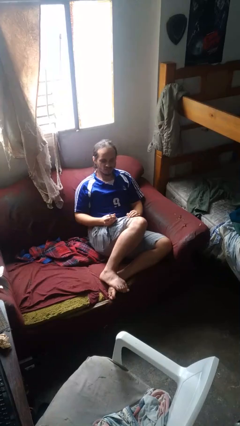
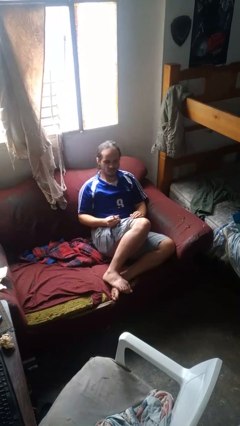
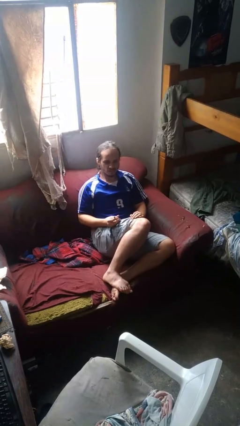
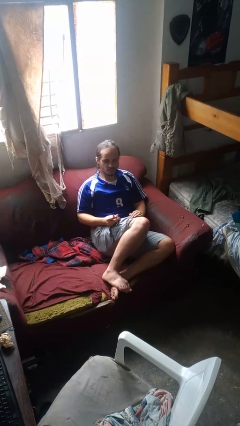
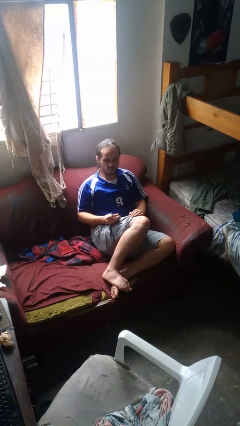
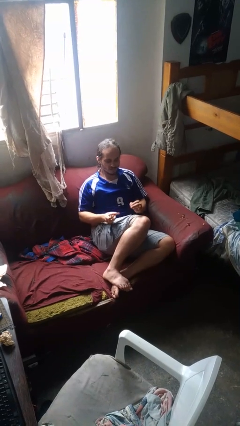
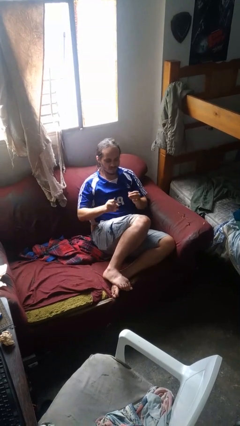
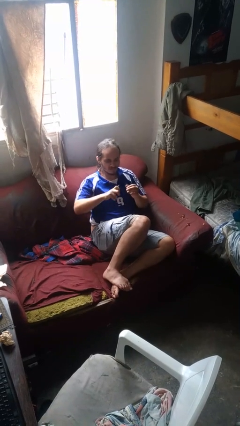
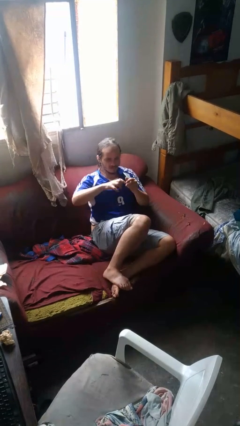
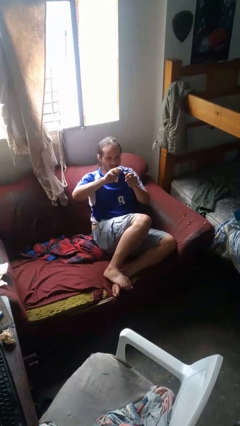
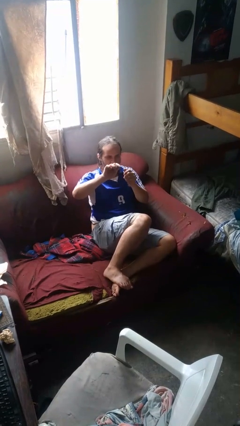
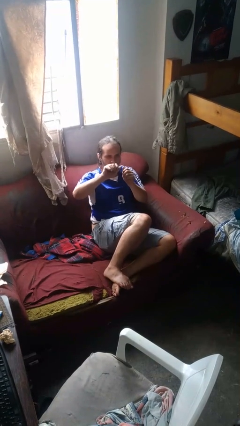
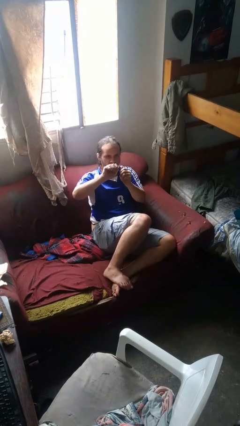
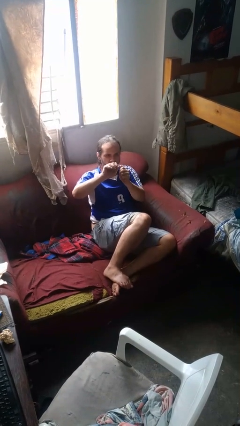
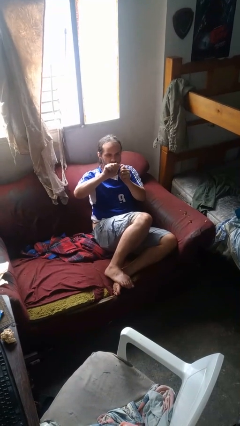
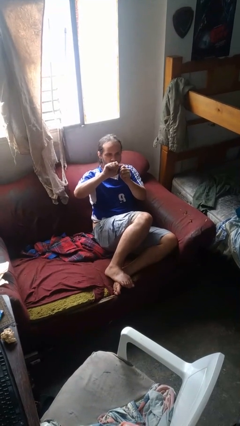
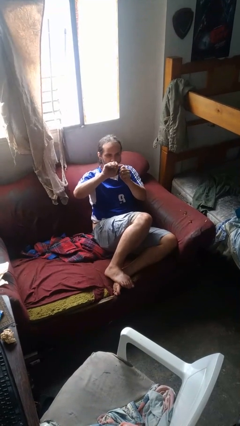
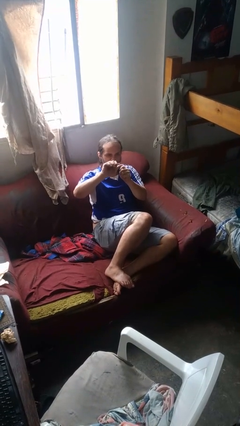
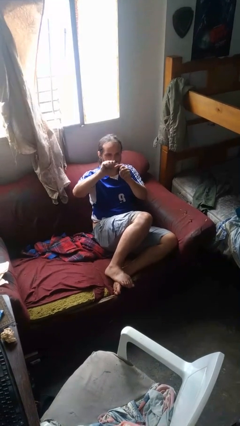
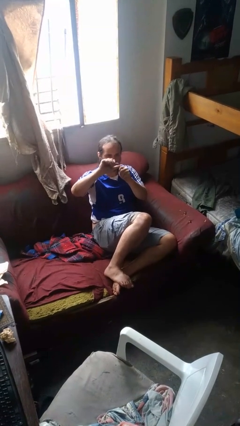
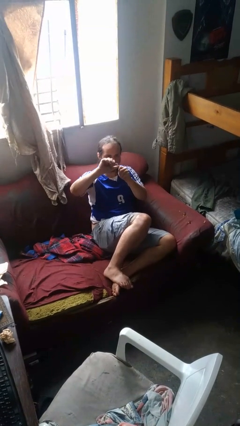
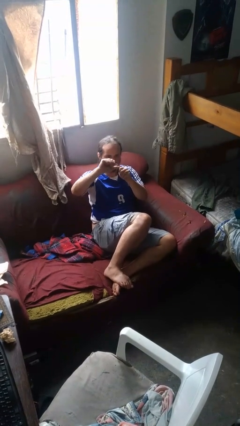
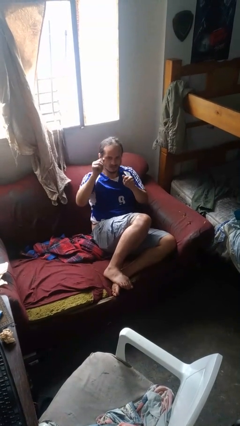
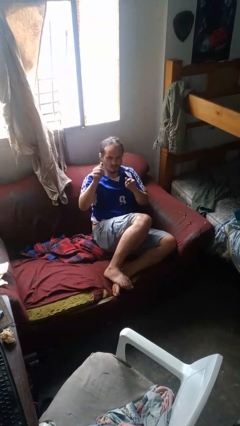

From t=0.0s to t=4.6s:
person clips fingernails

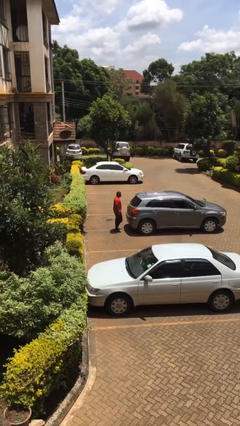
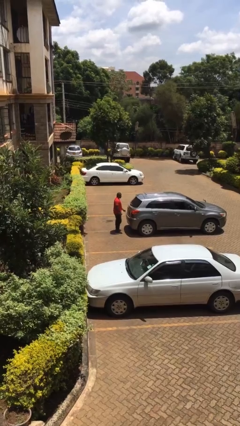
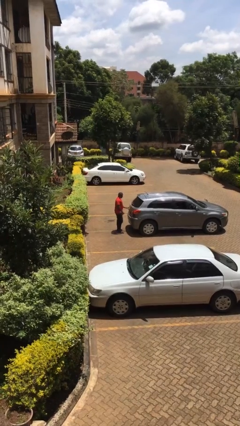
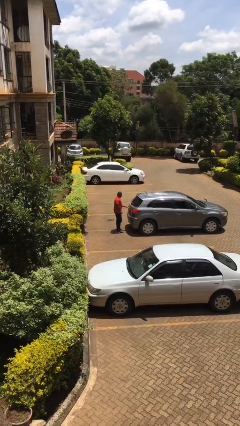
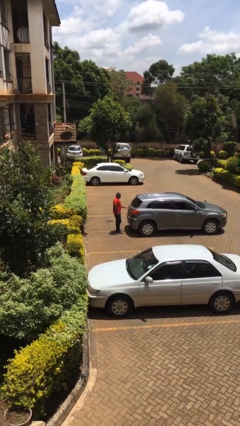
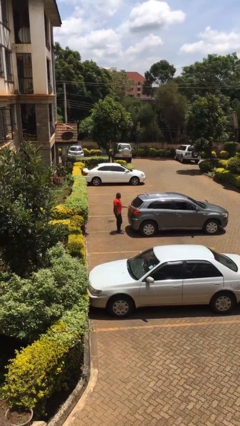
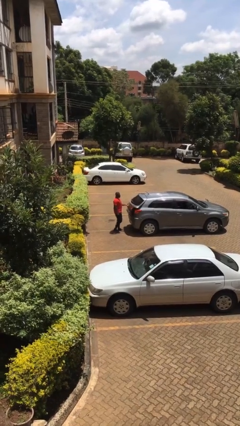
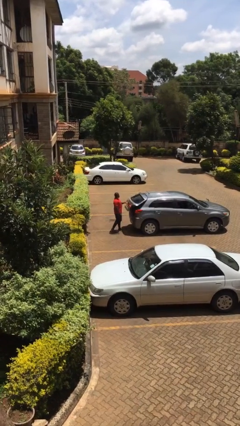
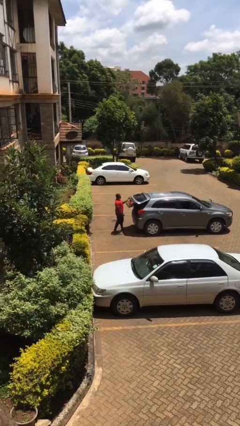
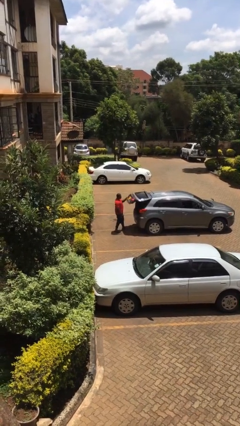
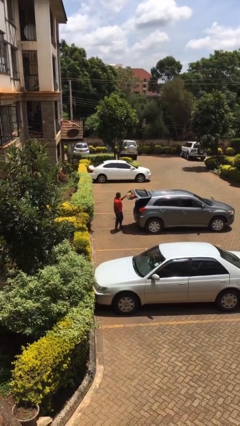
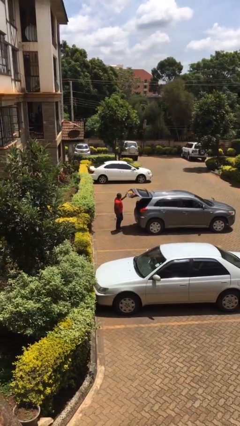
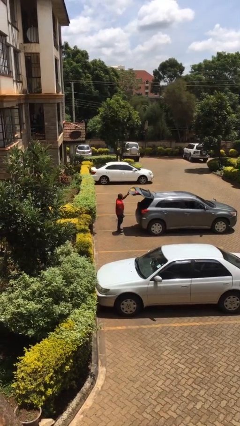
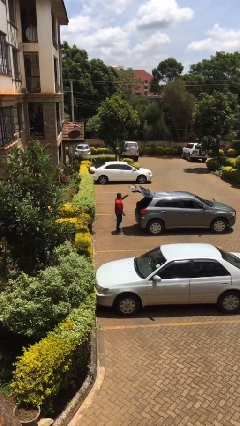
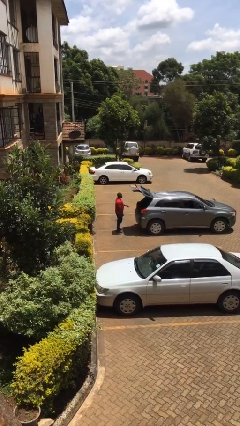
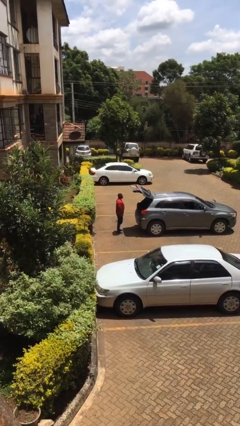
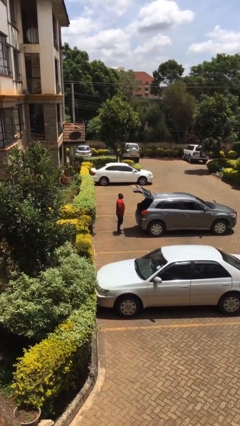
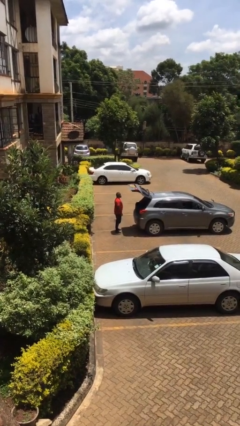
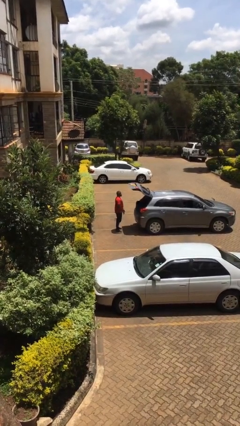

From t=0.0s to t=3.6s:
person opens car trunk

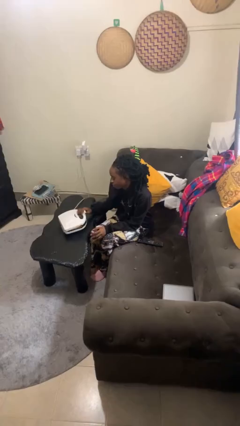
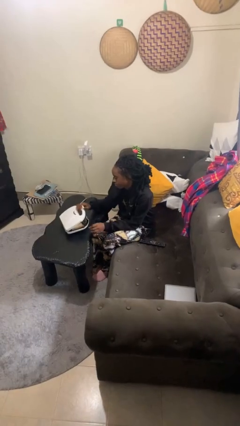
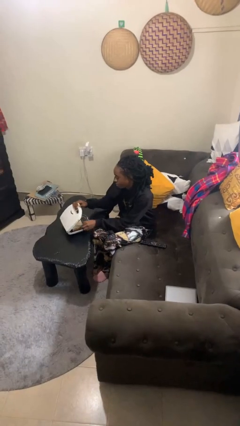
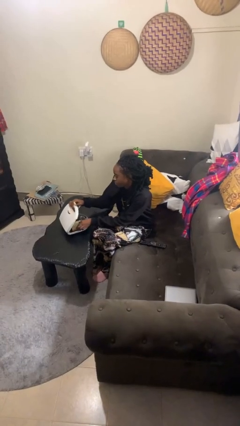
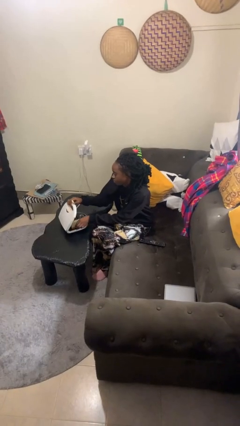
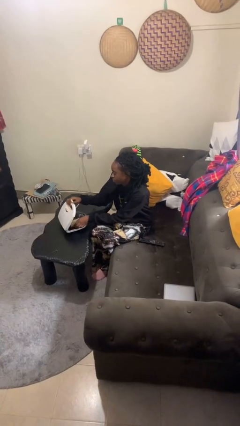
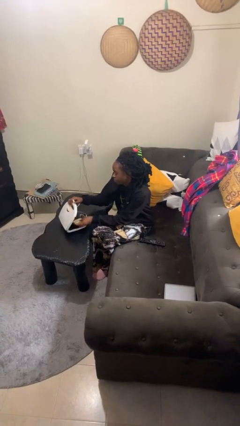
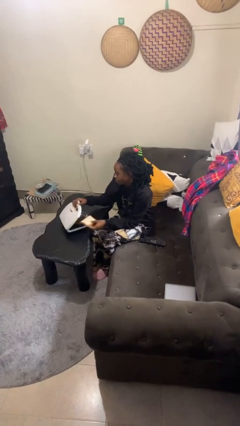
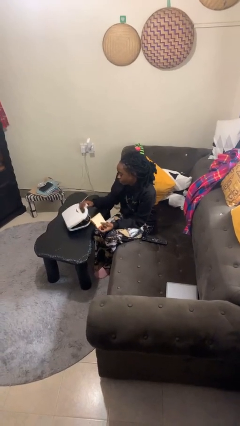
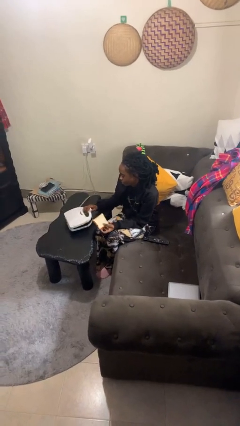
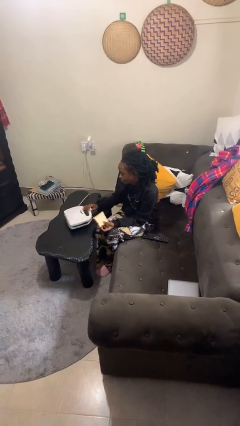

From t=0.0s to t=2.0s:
person takes object from toaster

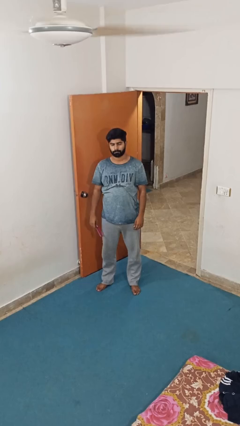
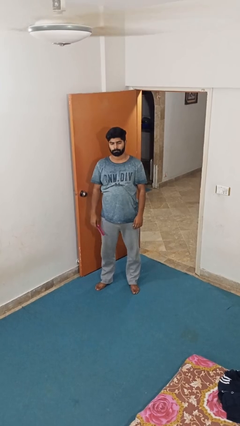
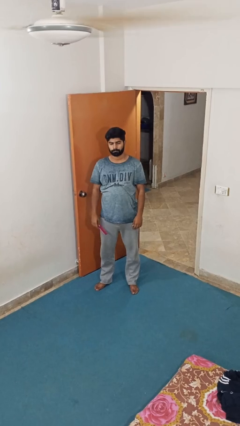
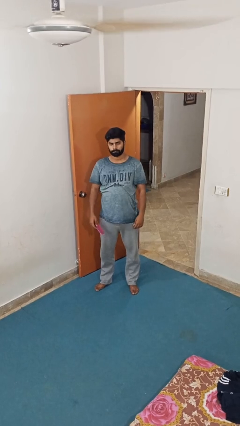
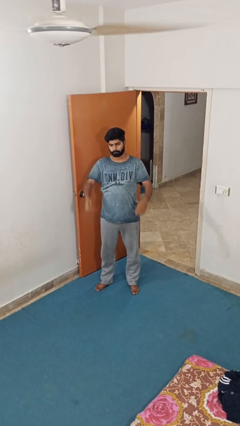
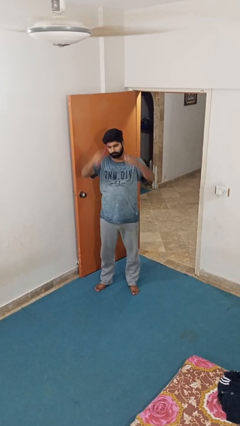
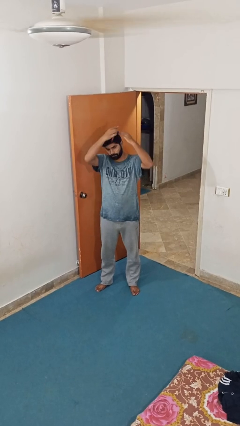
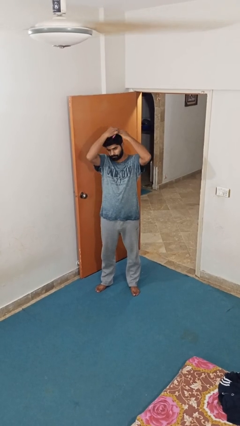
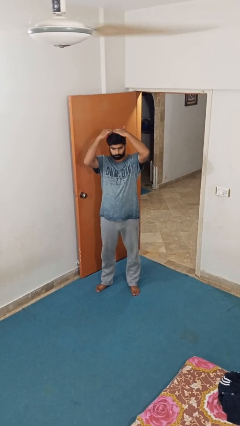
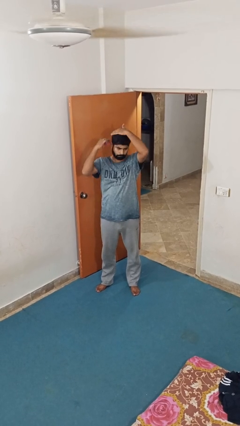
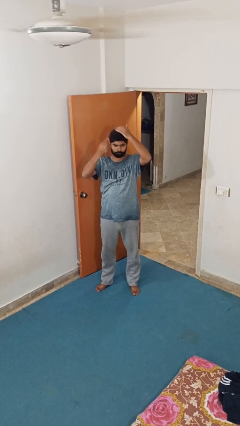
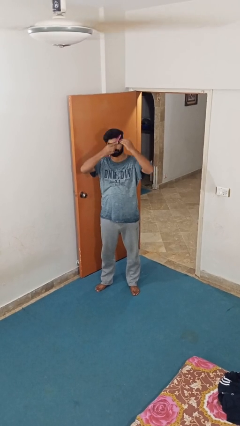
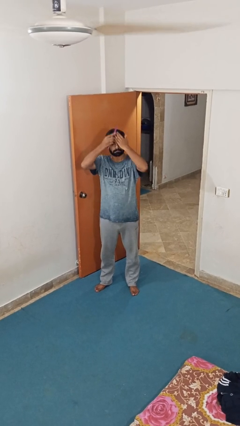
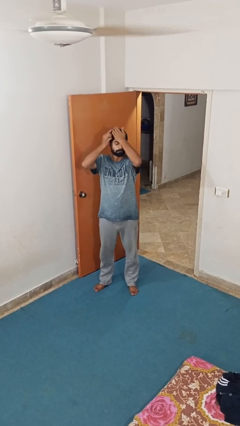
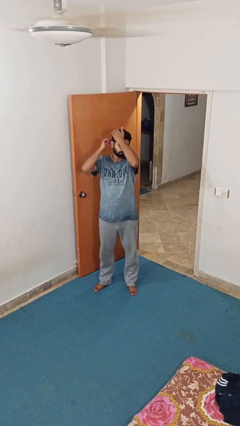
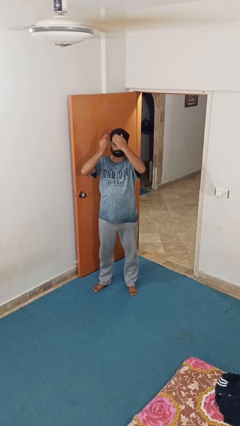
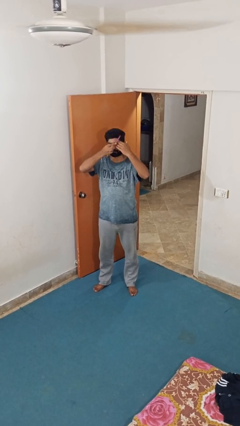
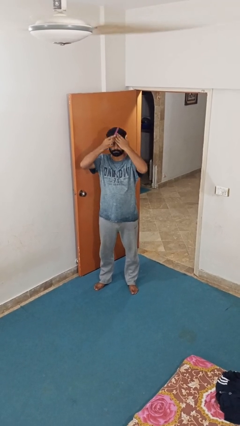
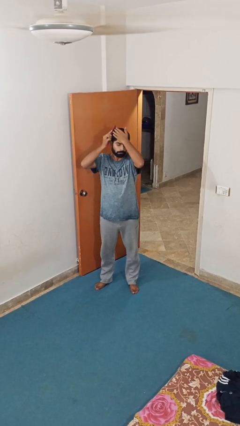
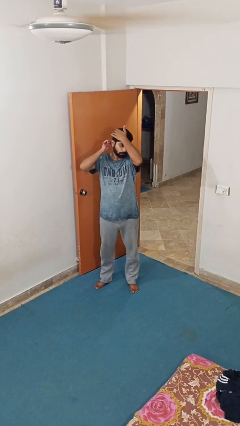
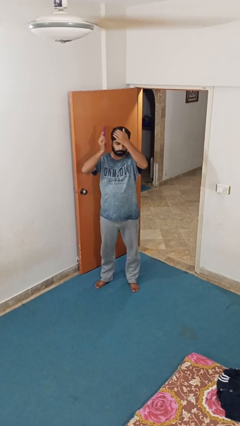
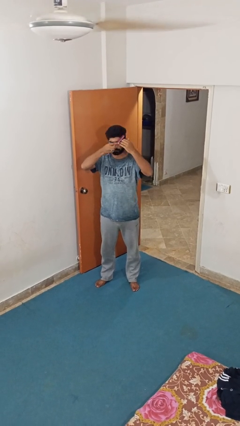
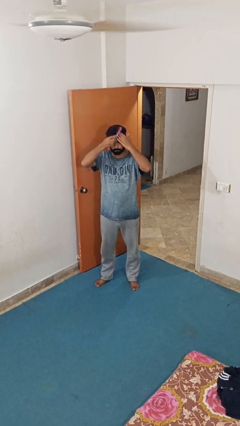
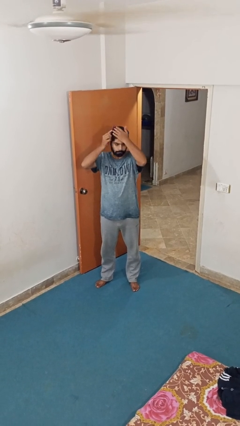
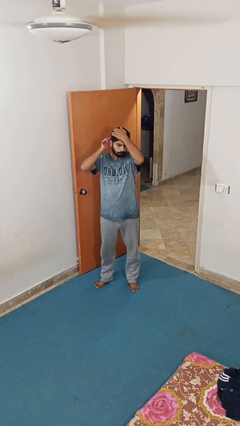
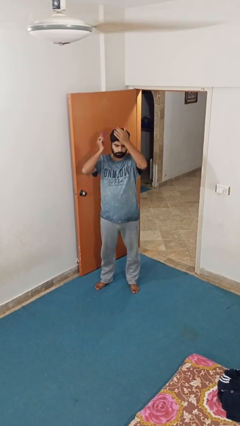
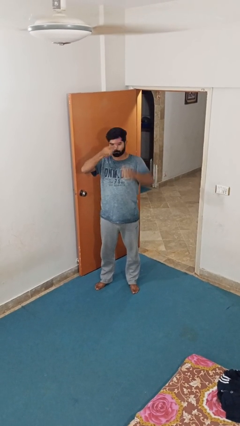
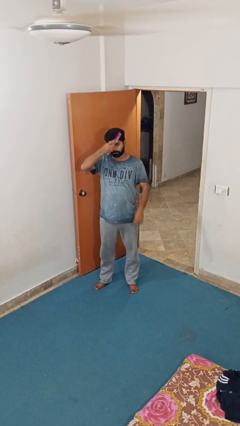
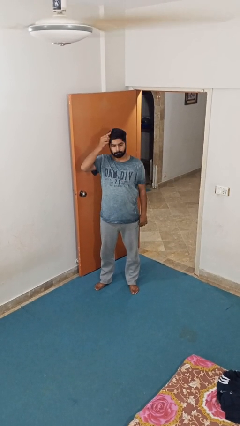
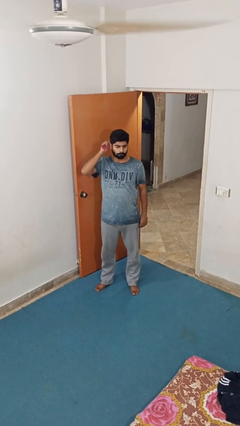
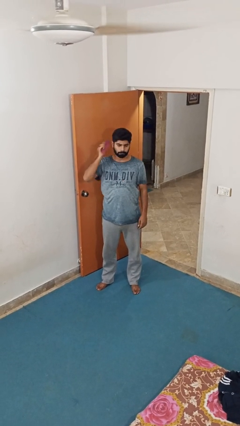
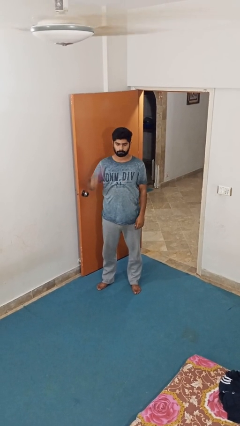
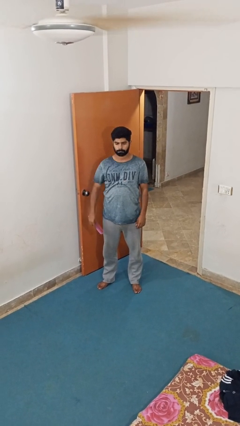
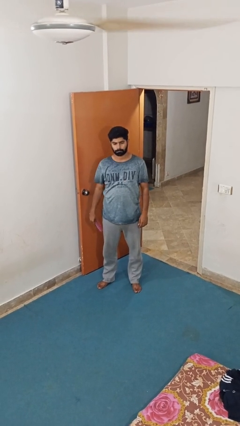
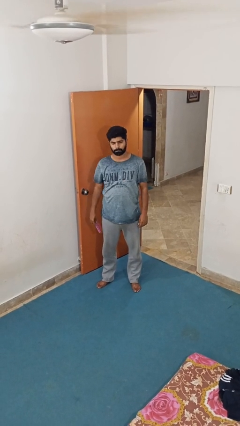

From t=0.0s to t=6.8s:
person brushes hair

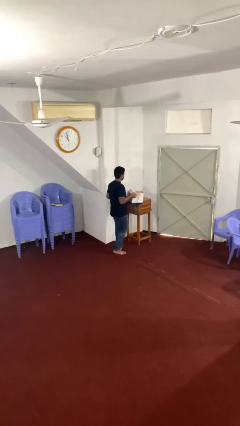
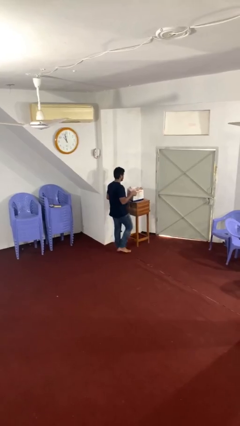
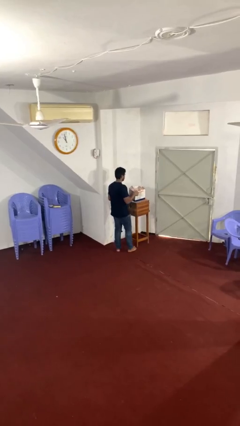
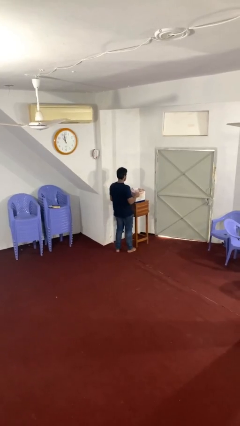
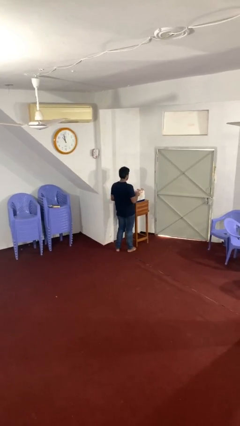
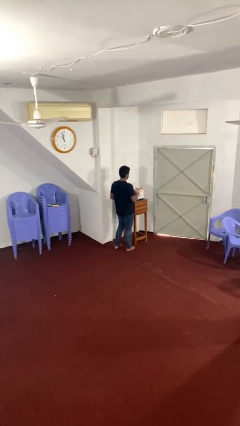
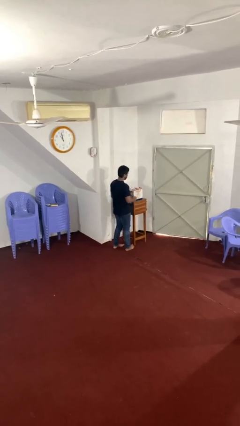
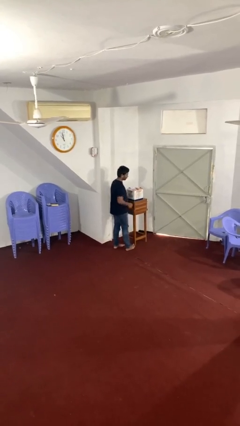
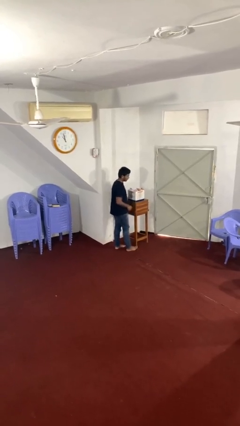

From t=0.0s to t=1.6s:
person puts down object on table
